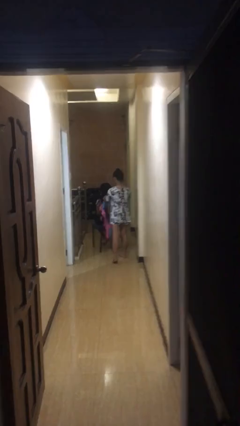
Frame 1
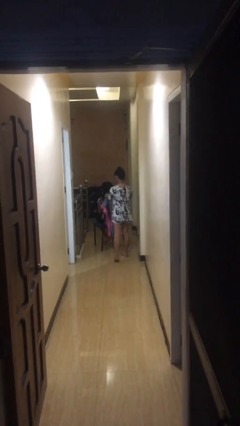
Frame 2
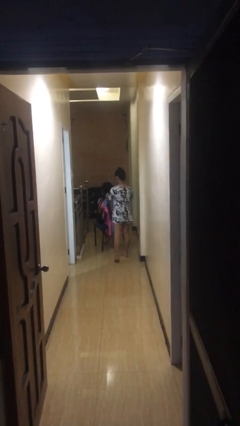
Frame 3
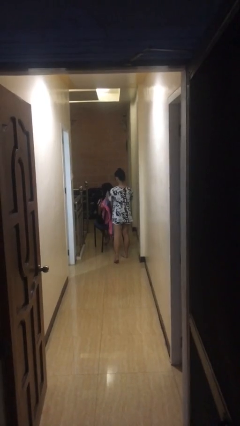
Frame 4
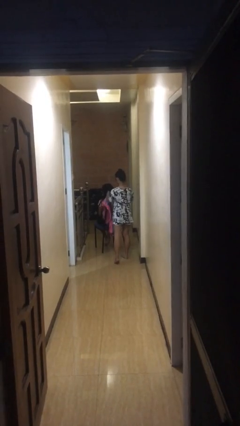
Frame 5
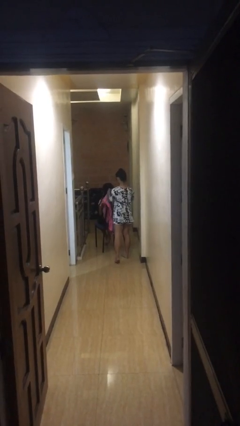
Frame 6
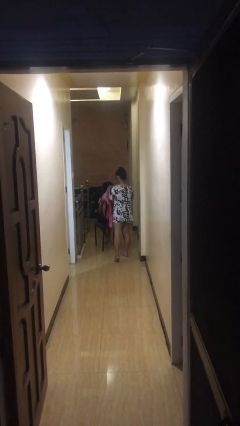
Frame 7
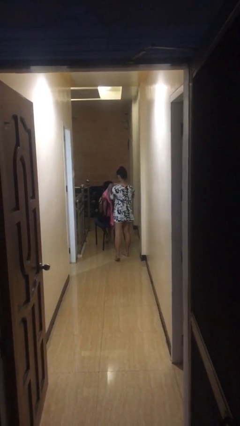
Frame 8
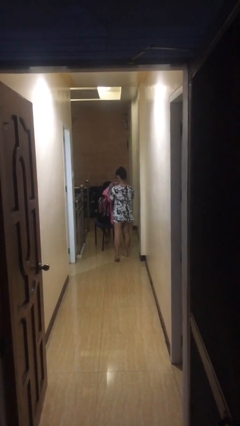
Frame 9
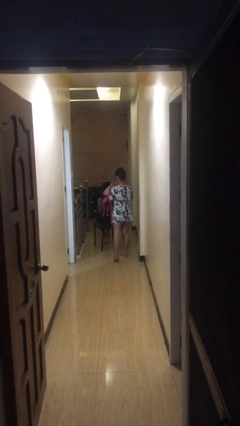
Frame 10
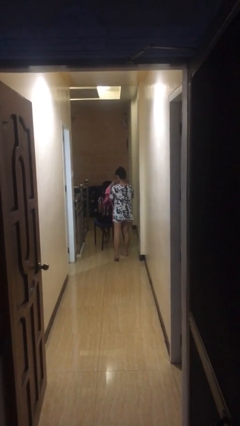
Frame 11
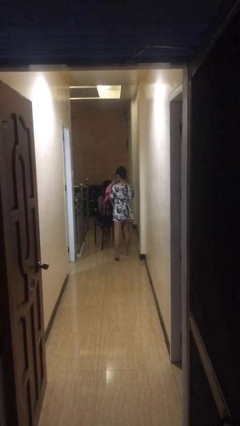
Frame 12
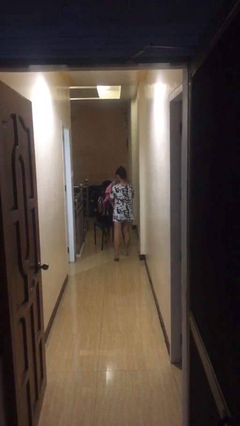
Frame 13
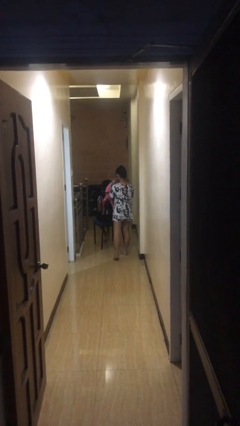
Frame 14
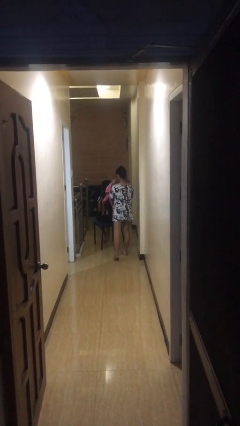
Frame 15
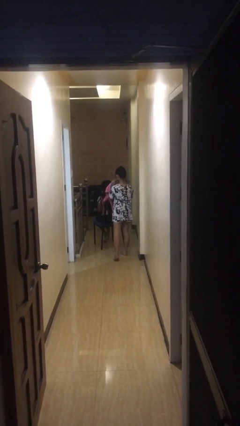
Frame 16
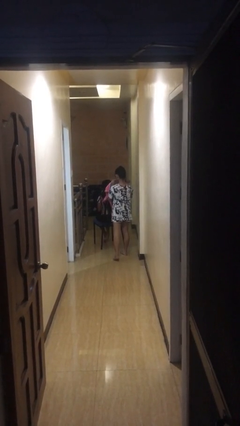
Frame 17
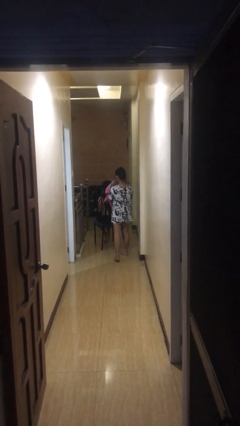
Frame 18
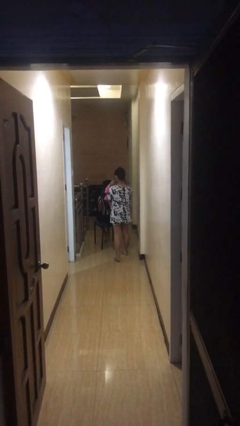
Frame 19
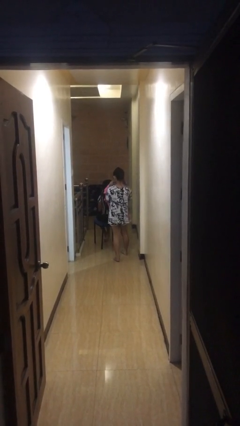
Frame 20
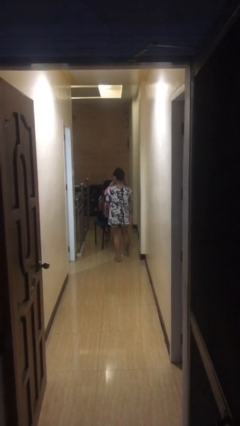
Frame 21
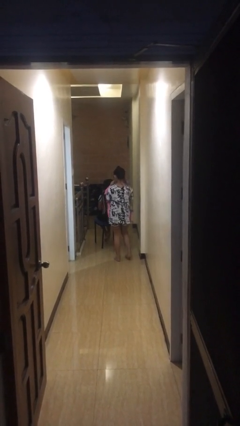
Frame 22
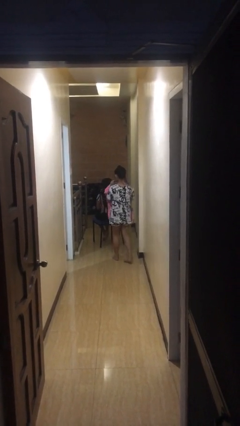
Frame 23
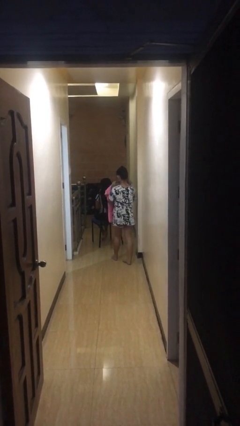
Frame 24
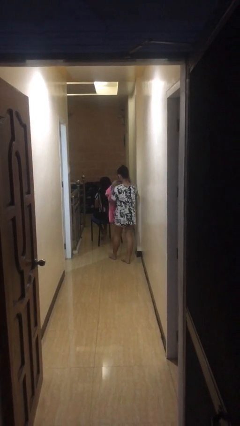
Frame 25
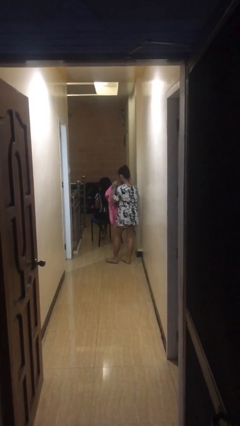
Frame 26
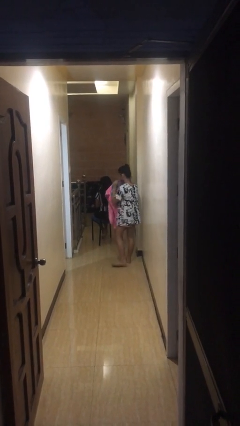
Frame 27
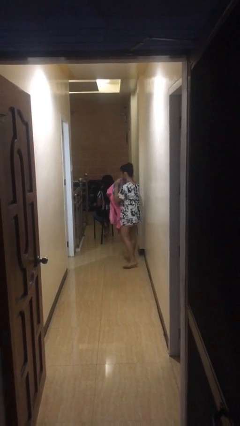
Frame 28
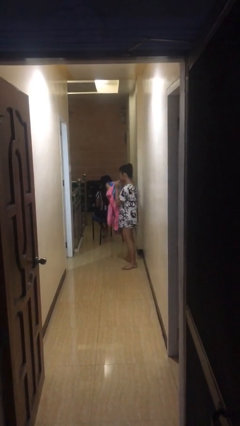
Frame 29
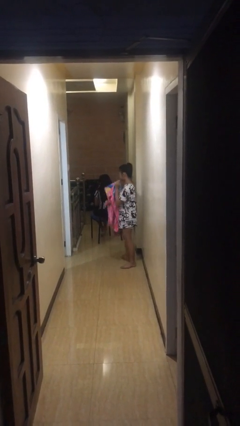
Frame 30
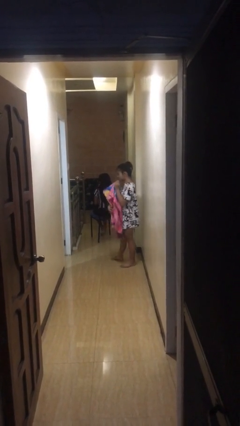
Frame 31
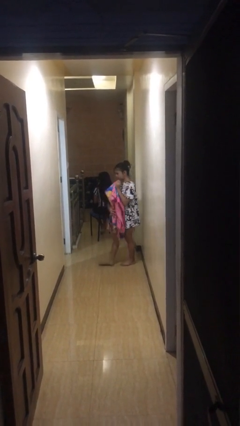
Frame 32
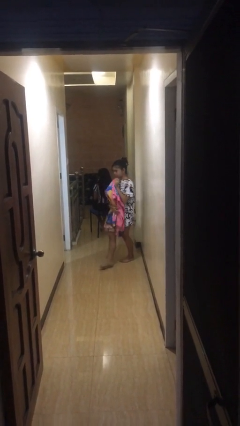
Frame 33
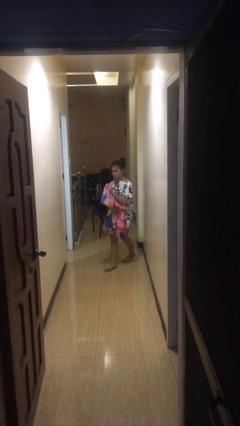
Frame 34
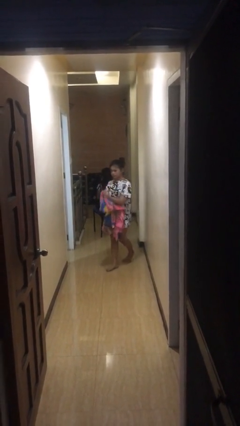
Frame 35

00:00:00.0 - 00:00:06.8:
person steals object from person

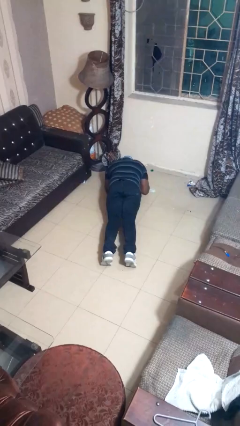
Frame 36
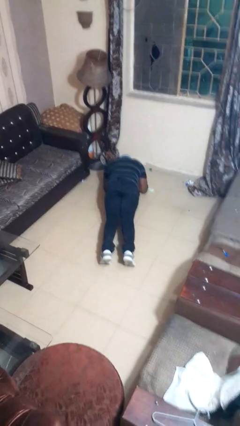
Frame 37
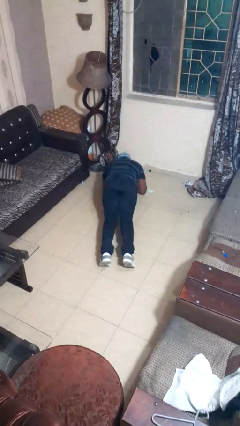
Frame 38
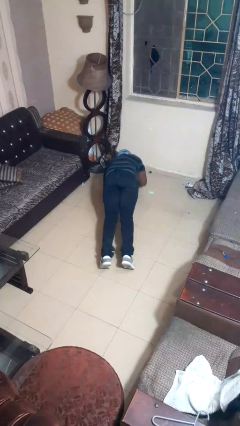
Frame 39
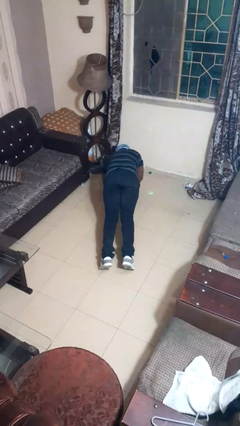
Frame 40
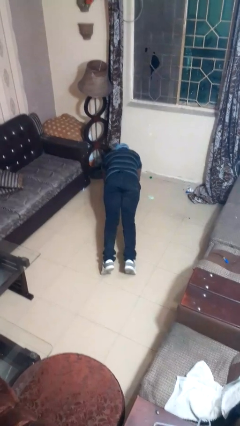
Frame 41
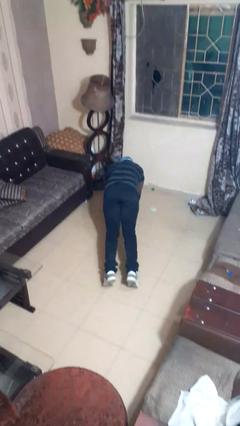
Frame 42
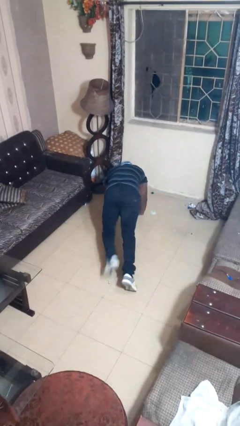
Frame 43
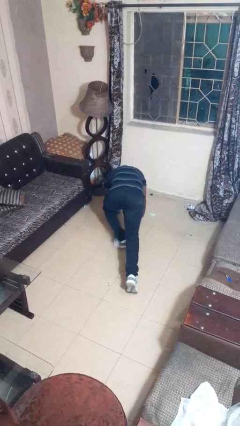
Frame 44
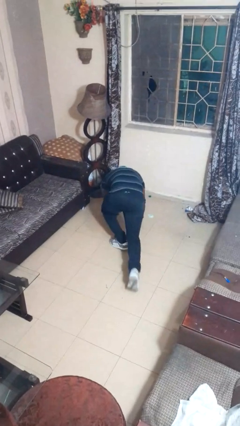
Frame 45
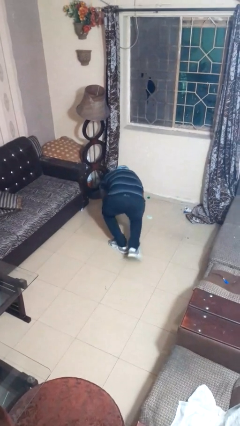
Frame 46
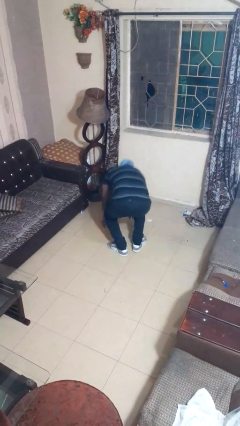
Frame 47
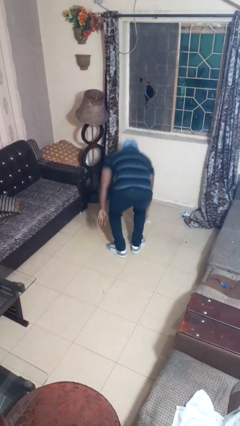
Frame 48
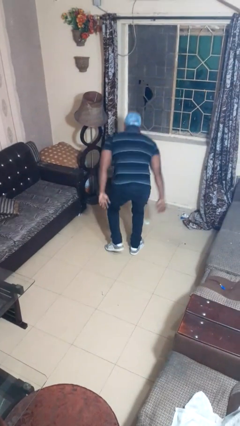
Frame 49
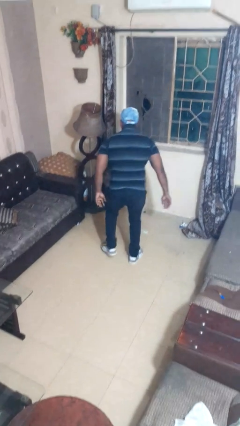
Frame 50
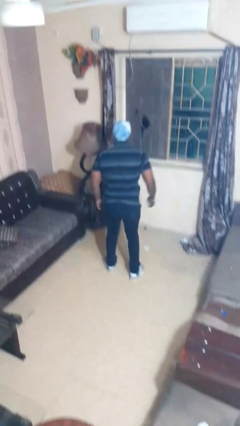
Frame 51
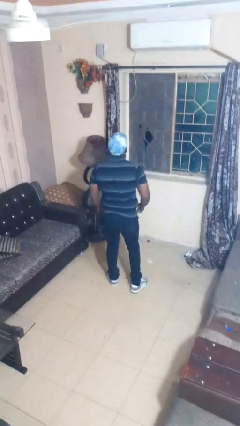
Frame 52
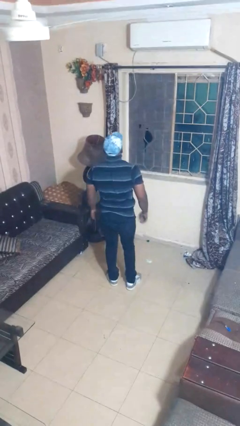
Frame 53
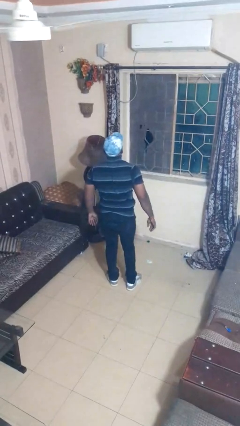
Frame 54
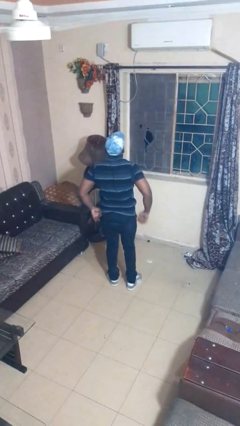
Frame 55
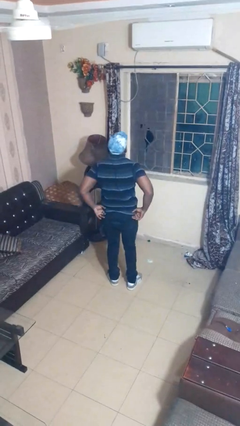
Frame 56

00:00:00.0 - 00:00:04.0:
person stands up from floor

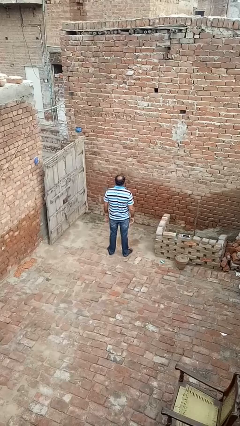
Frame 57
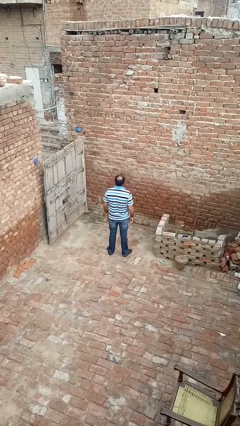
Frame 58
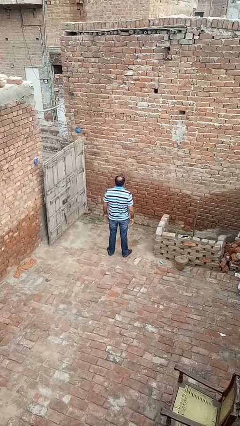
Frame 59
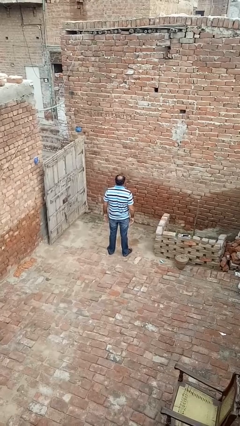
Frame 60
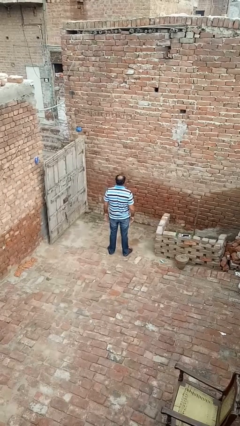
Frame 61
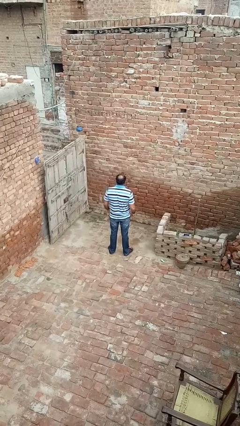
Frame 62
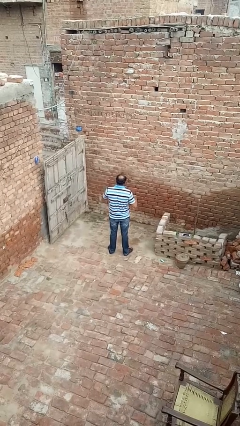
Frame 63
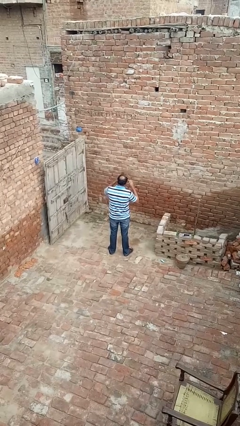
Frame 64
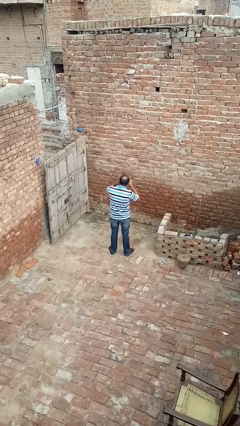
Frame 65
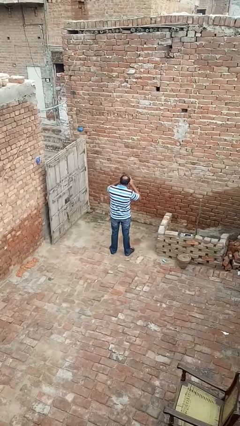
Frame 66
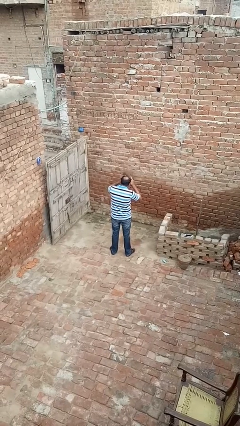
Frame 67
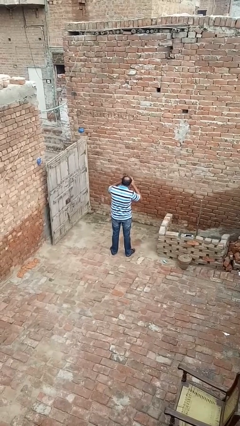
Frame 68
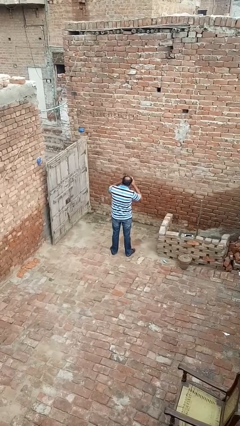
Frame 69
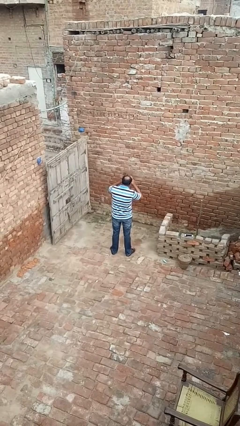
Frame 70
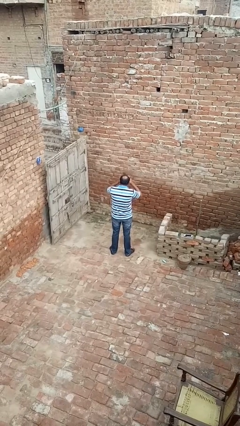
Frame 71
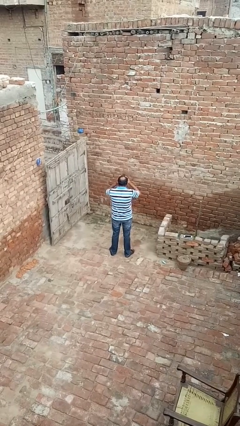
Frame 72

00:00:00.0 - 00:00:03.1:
person shades eyes

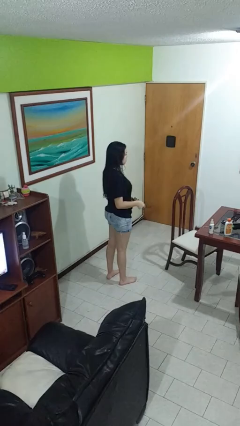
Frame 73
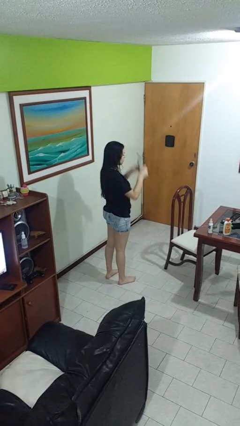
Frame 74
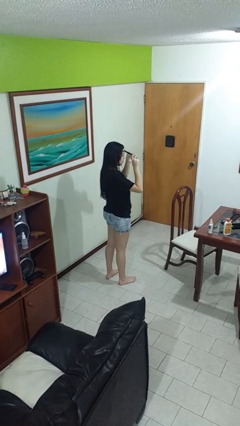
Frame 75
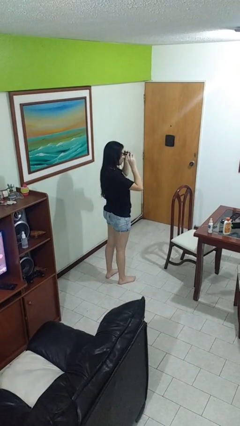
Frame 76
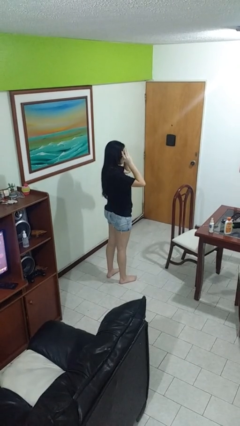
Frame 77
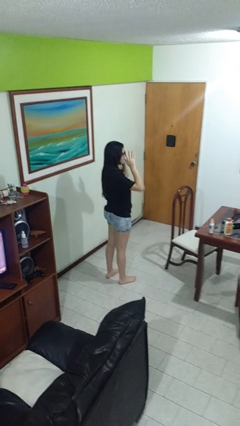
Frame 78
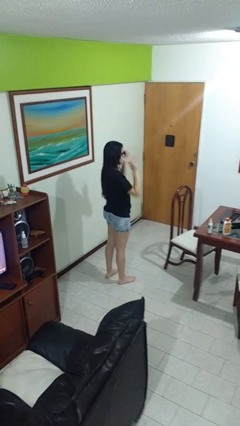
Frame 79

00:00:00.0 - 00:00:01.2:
person puts on sunglasses

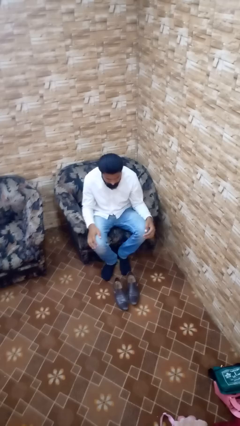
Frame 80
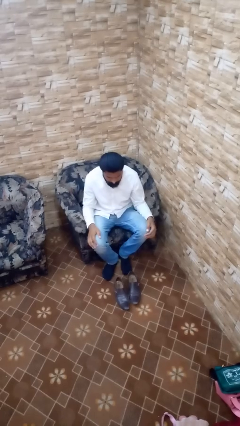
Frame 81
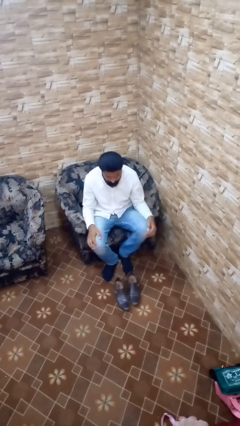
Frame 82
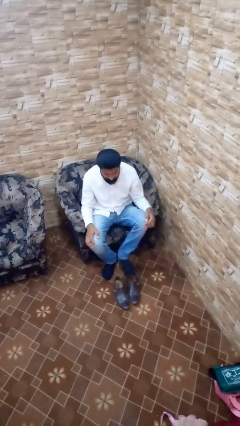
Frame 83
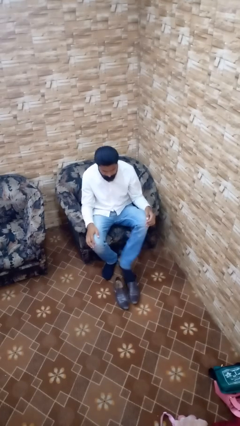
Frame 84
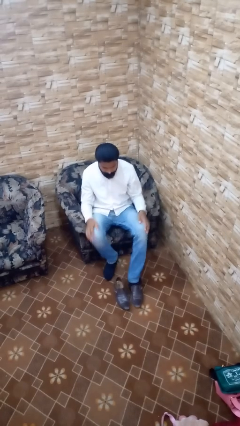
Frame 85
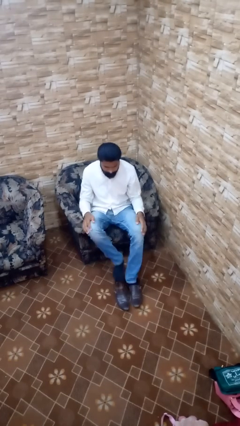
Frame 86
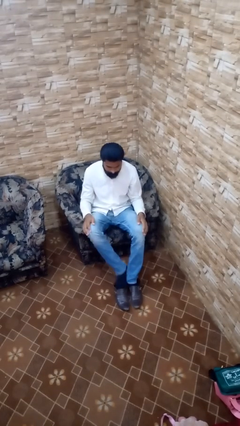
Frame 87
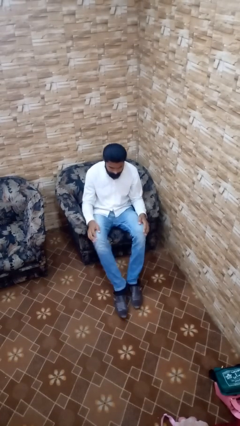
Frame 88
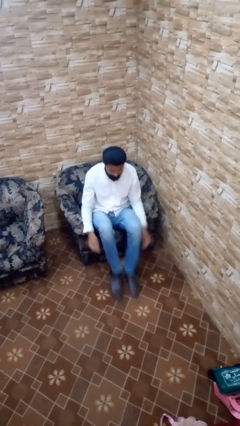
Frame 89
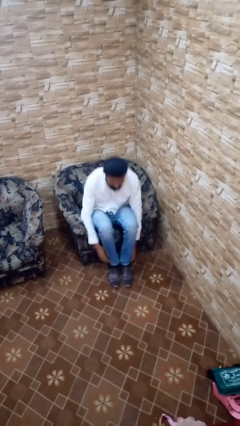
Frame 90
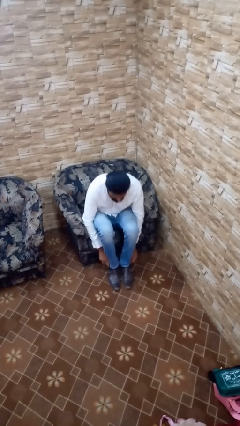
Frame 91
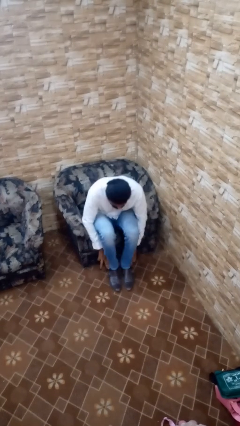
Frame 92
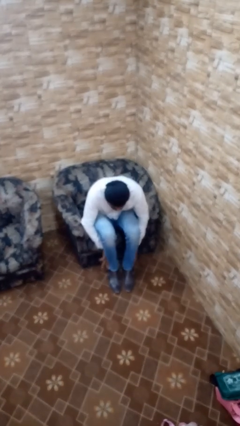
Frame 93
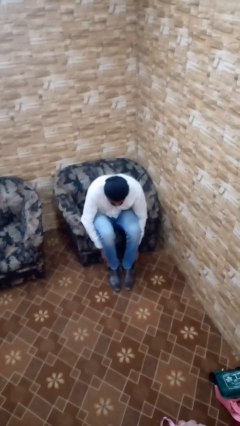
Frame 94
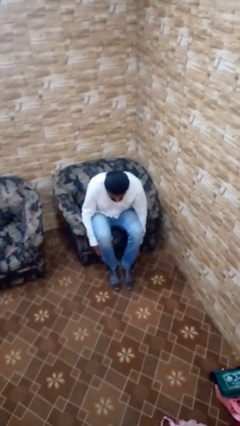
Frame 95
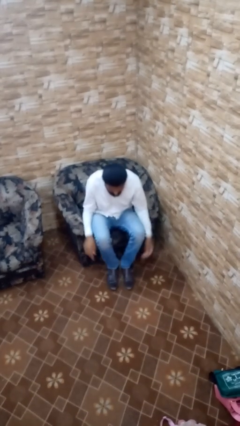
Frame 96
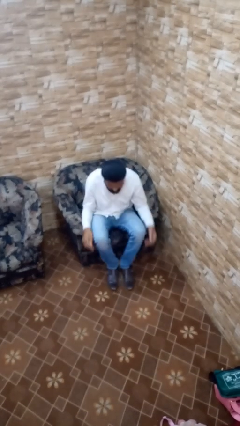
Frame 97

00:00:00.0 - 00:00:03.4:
person puts on shoes
